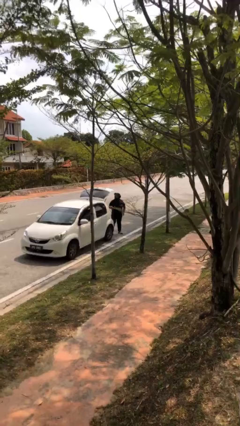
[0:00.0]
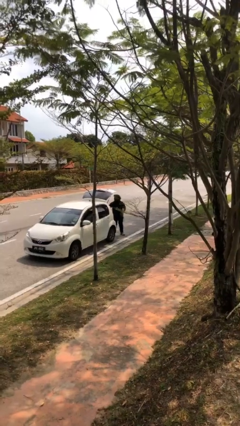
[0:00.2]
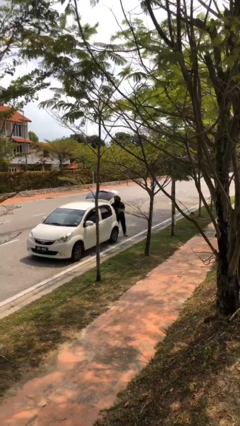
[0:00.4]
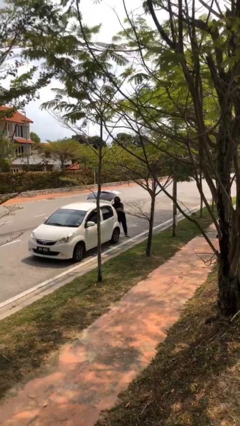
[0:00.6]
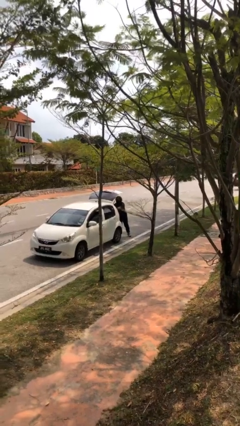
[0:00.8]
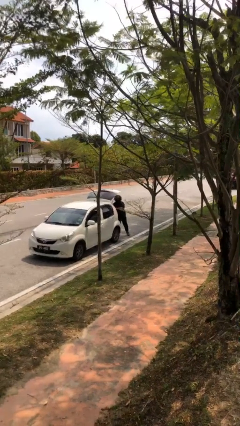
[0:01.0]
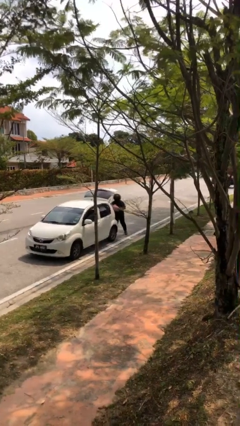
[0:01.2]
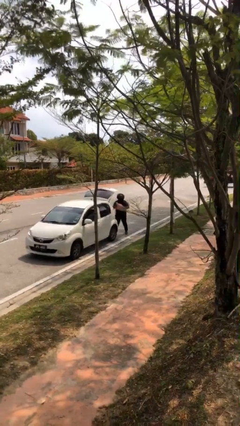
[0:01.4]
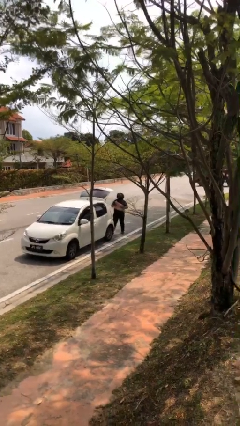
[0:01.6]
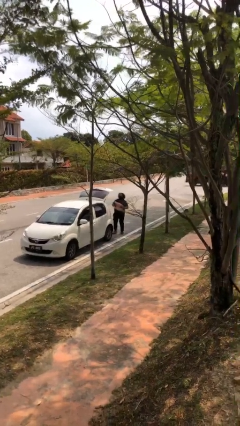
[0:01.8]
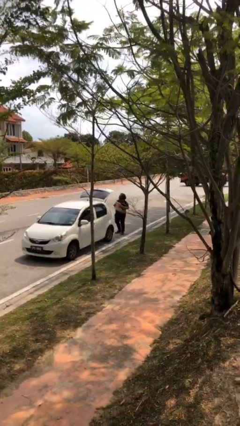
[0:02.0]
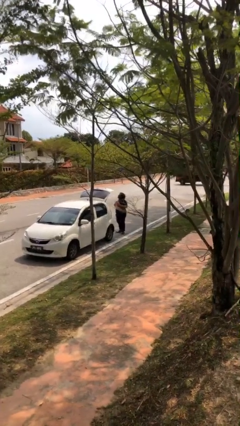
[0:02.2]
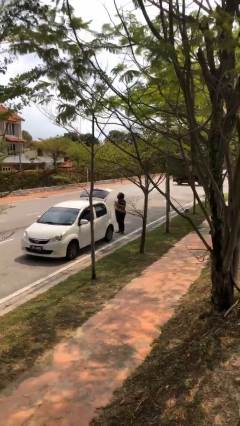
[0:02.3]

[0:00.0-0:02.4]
person unloads car

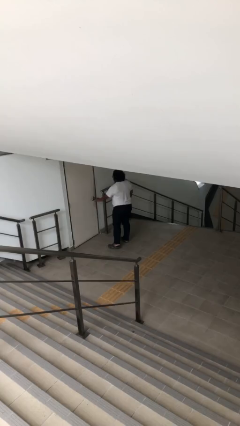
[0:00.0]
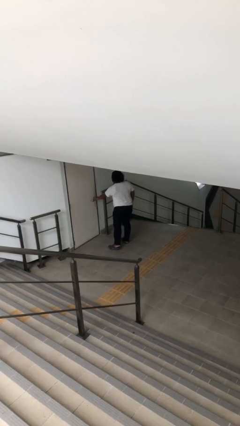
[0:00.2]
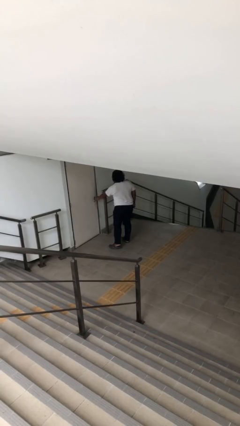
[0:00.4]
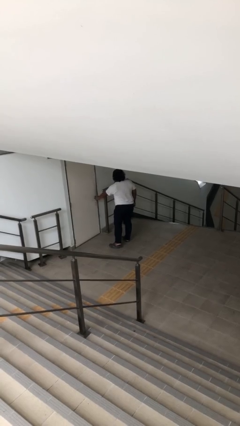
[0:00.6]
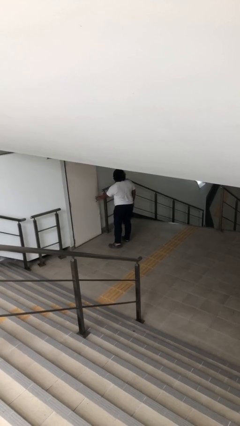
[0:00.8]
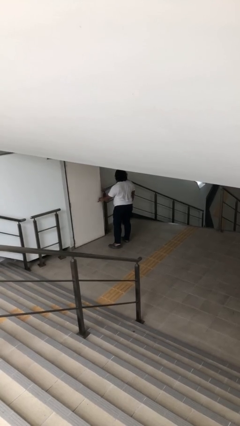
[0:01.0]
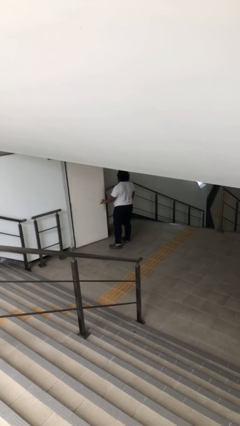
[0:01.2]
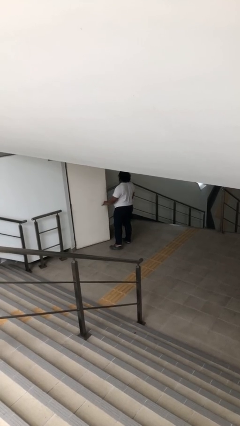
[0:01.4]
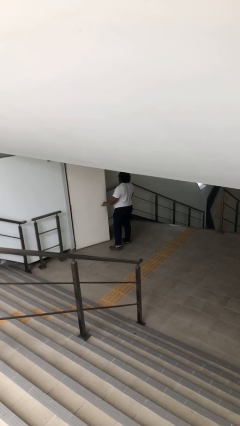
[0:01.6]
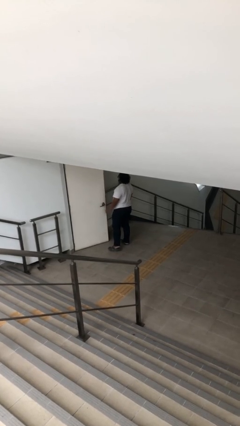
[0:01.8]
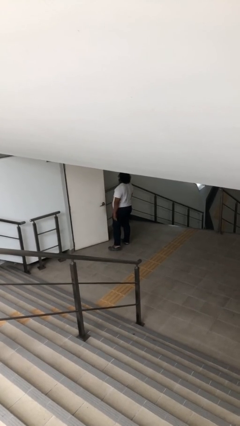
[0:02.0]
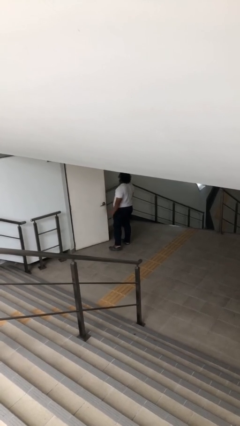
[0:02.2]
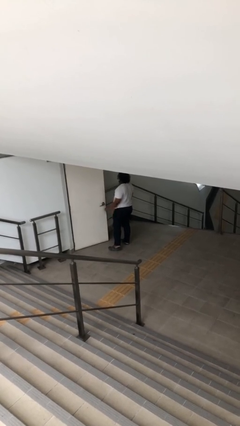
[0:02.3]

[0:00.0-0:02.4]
person opens facility door

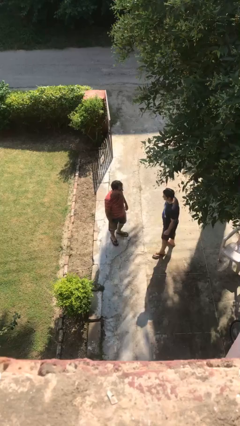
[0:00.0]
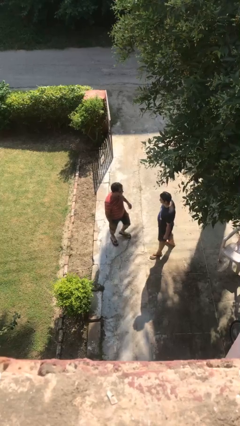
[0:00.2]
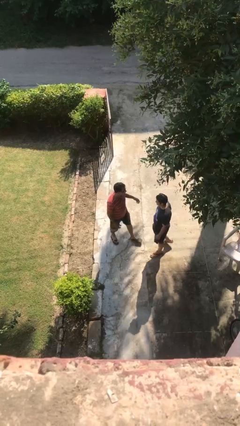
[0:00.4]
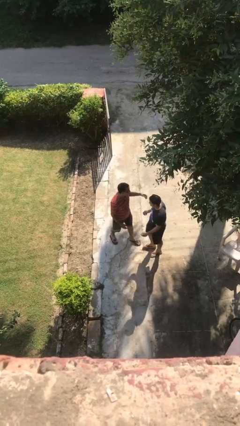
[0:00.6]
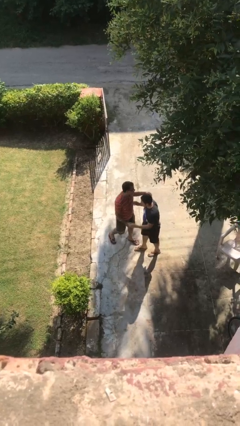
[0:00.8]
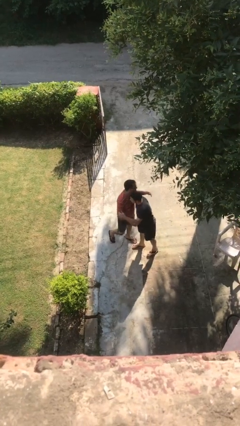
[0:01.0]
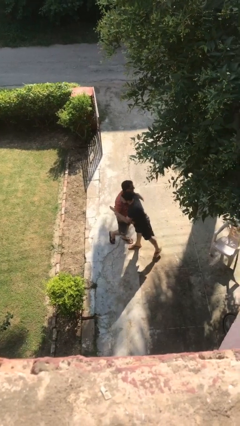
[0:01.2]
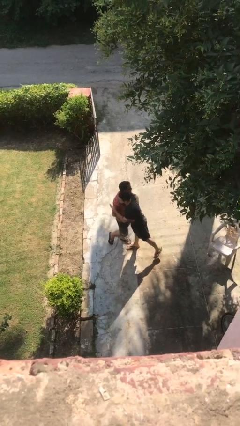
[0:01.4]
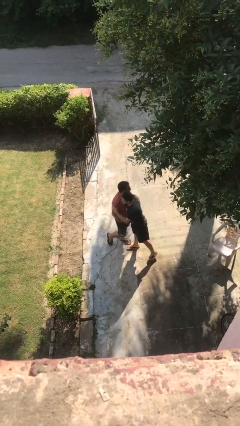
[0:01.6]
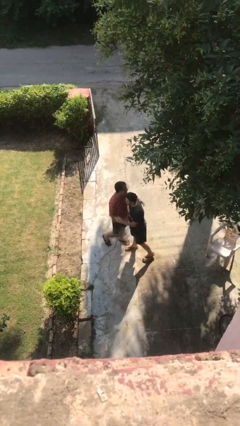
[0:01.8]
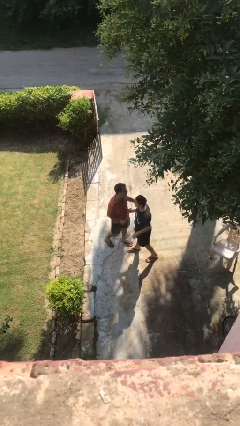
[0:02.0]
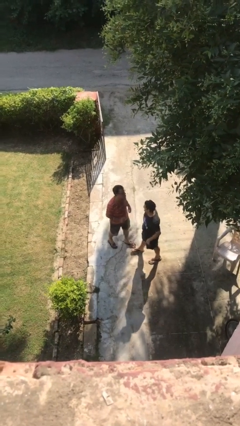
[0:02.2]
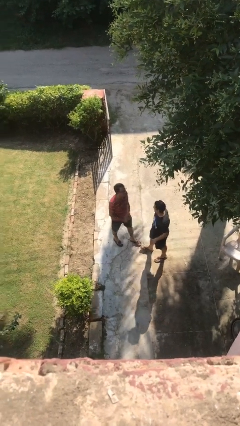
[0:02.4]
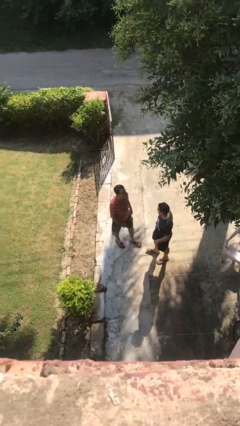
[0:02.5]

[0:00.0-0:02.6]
person embraces person

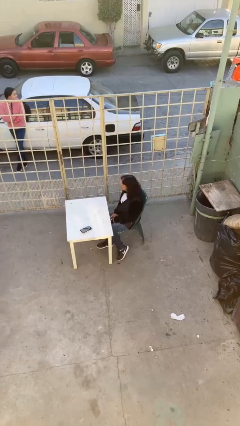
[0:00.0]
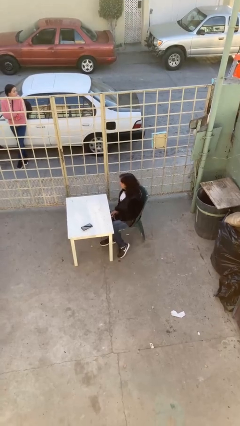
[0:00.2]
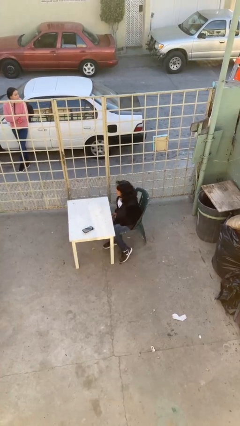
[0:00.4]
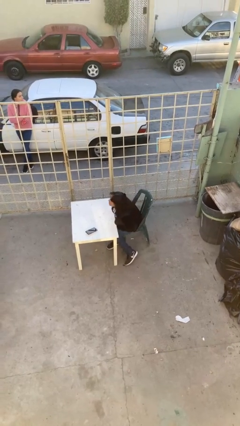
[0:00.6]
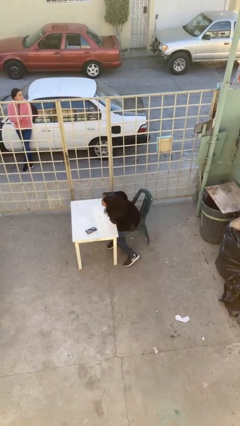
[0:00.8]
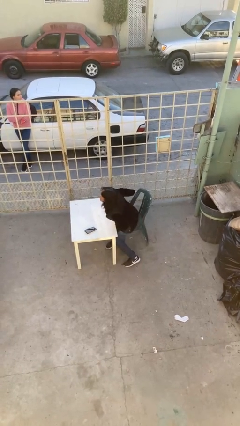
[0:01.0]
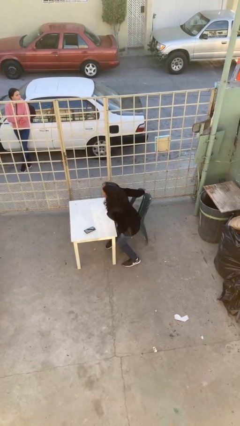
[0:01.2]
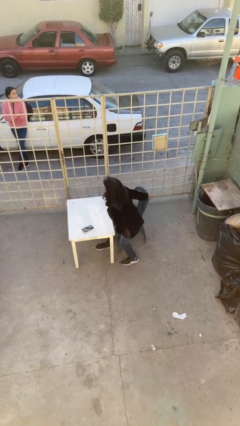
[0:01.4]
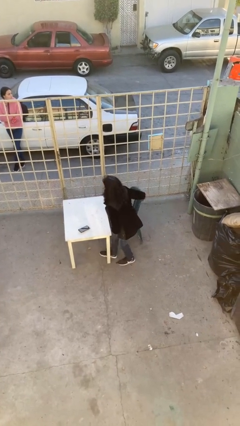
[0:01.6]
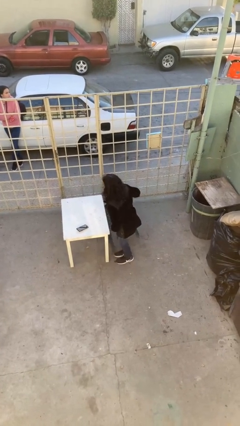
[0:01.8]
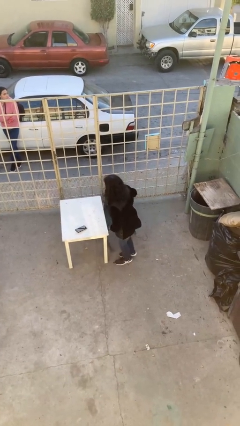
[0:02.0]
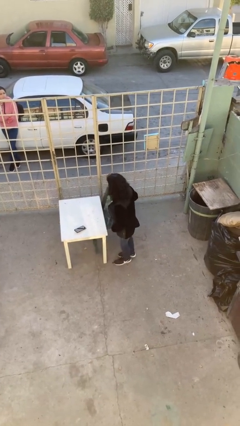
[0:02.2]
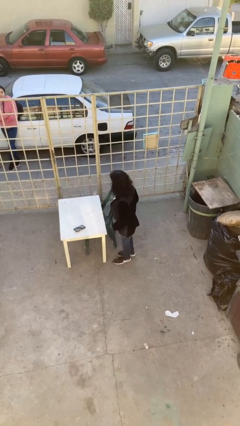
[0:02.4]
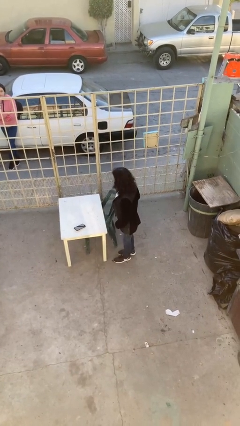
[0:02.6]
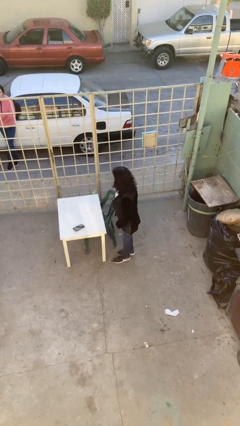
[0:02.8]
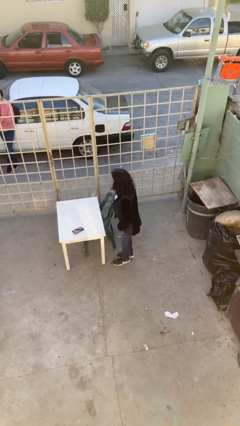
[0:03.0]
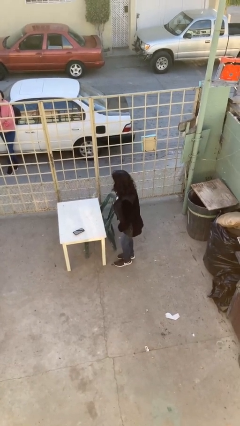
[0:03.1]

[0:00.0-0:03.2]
person stands up

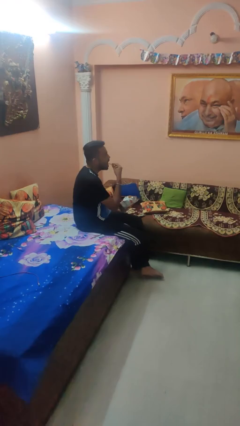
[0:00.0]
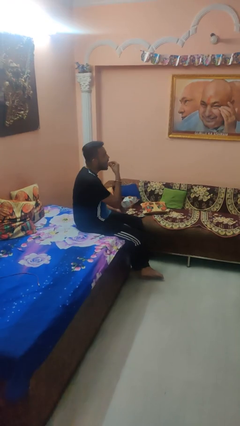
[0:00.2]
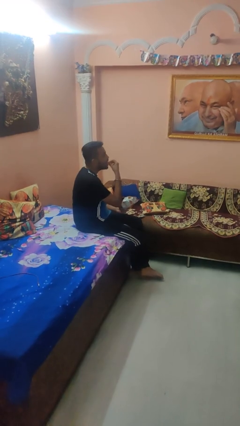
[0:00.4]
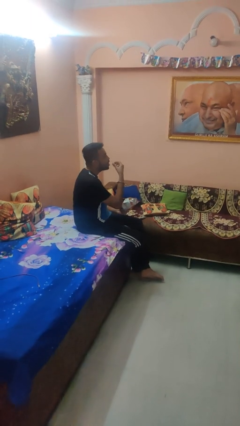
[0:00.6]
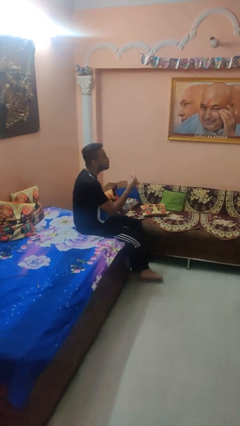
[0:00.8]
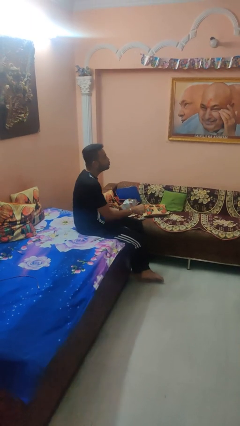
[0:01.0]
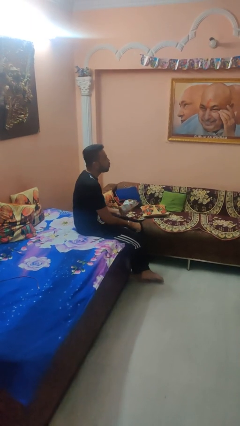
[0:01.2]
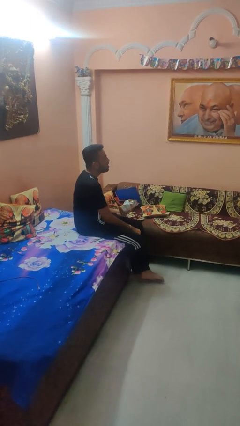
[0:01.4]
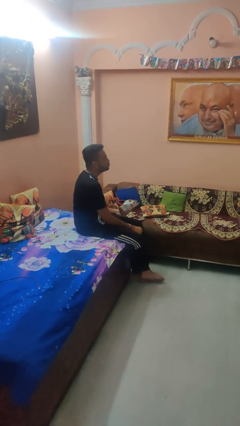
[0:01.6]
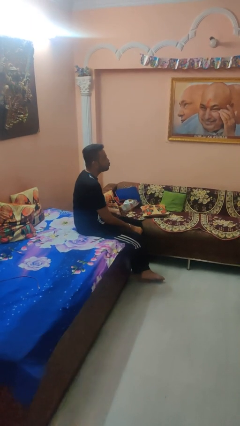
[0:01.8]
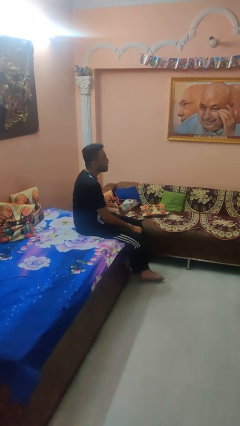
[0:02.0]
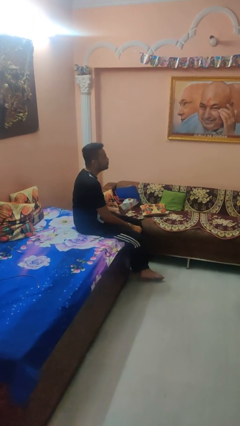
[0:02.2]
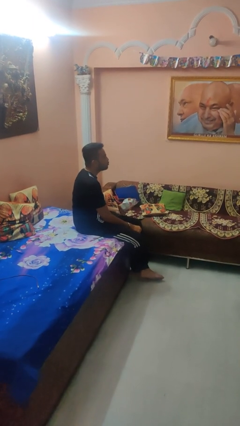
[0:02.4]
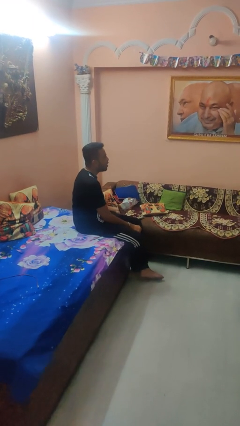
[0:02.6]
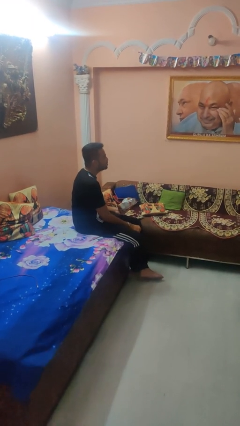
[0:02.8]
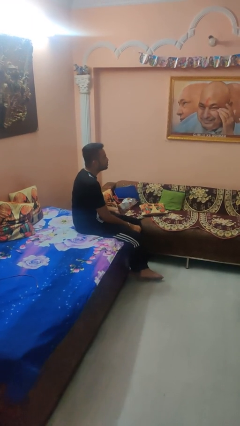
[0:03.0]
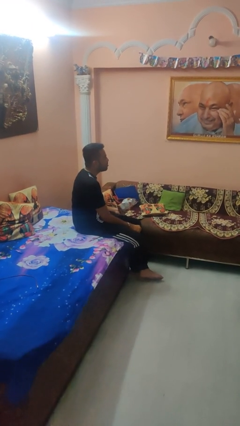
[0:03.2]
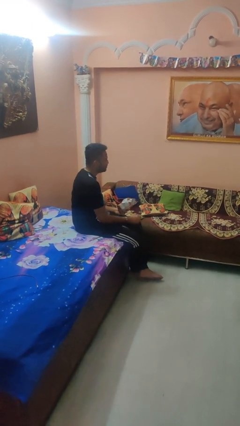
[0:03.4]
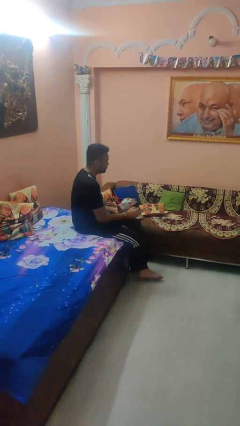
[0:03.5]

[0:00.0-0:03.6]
person eats snack from bag

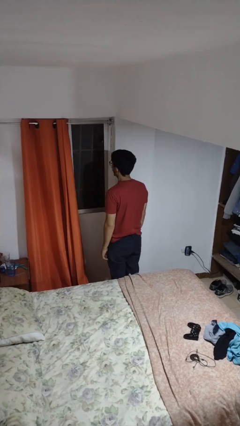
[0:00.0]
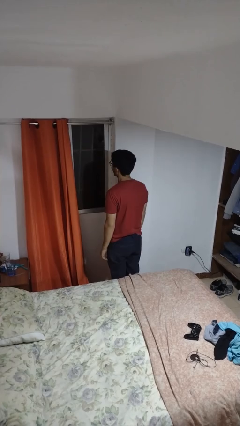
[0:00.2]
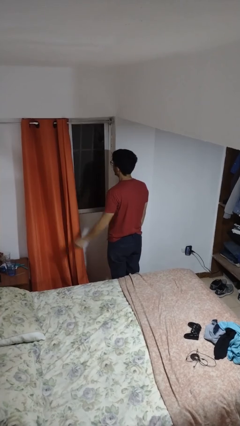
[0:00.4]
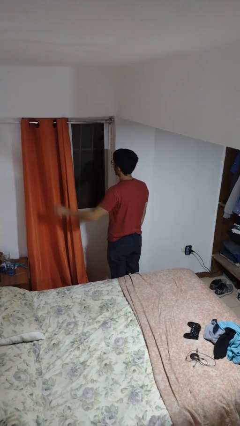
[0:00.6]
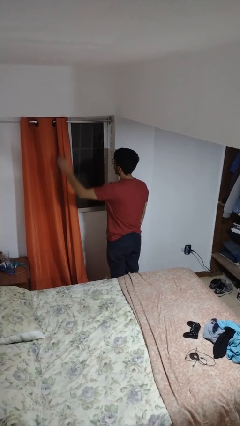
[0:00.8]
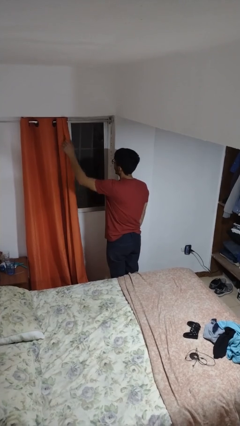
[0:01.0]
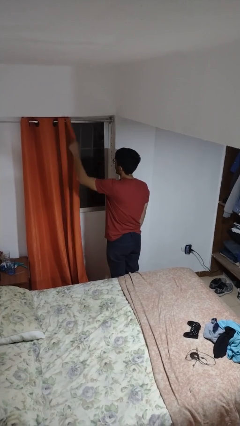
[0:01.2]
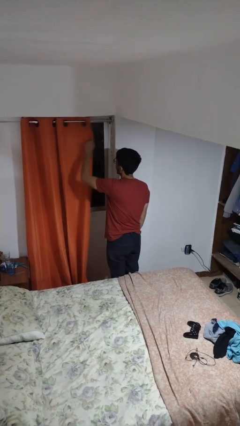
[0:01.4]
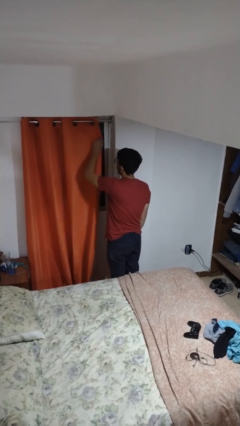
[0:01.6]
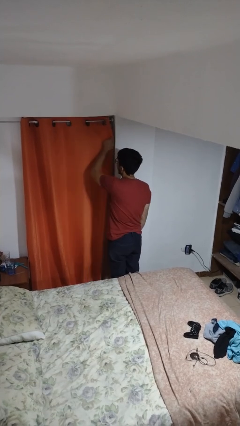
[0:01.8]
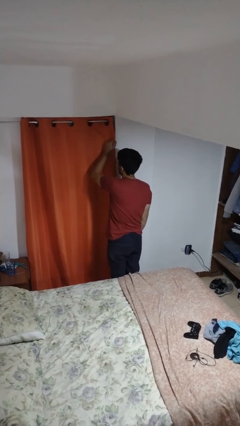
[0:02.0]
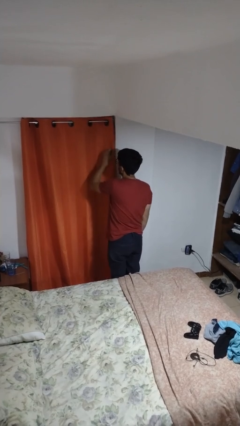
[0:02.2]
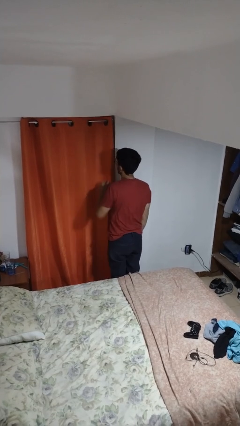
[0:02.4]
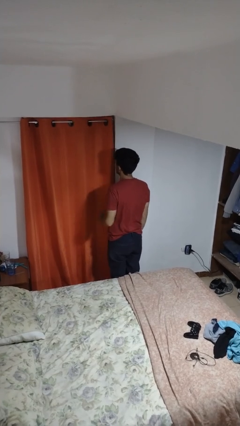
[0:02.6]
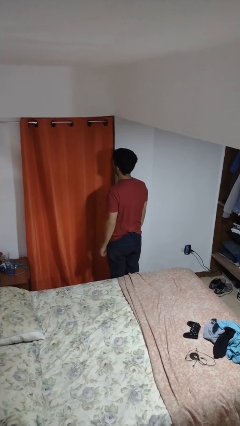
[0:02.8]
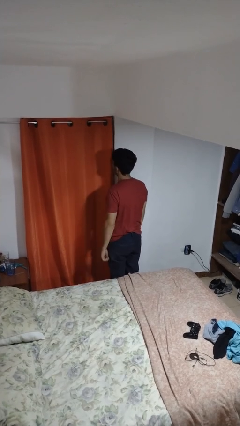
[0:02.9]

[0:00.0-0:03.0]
person closes curtains

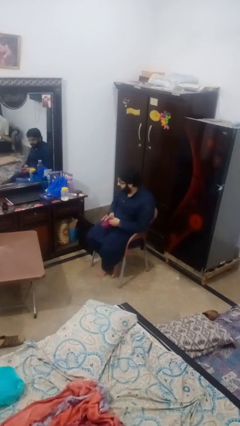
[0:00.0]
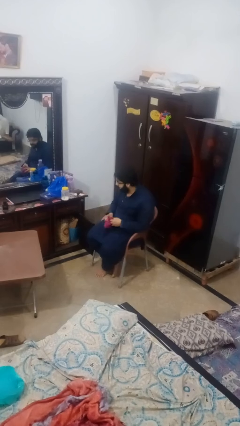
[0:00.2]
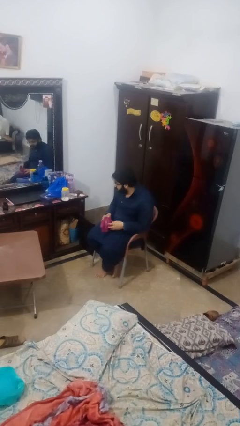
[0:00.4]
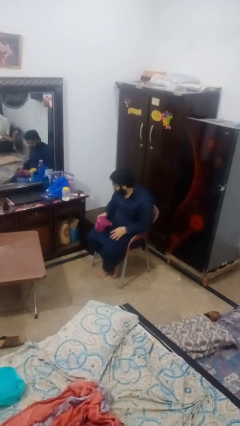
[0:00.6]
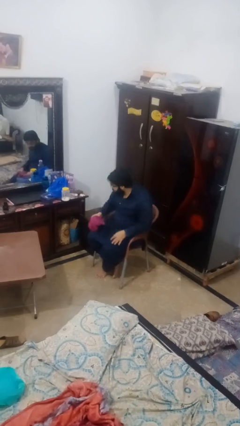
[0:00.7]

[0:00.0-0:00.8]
person takes clothes from dresser
